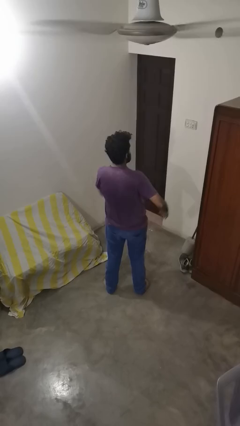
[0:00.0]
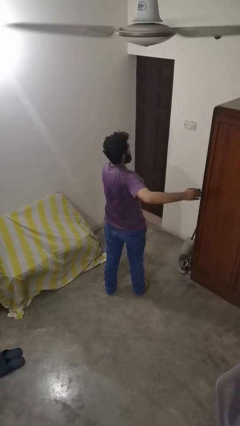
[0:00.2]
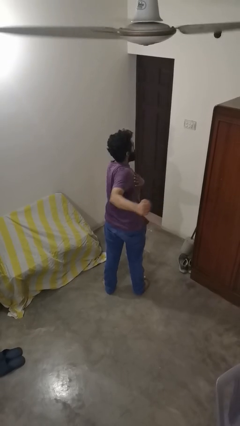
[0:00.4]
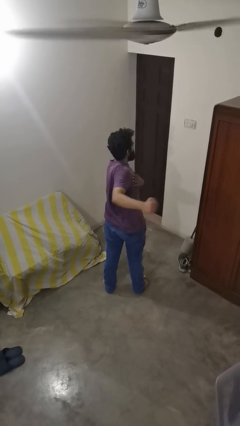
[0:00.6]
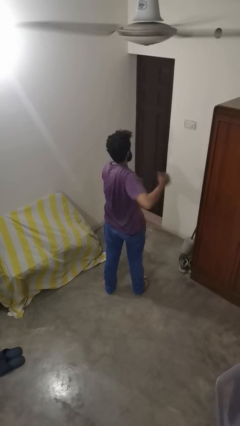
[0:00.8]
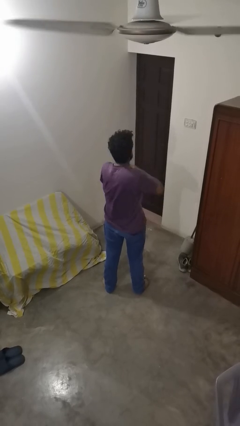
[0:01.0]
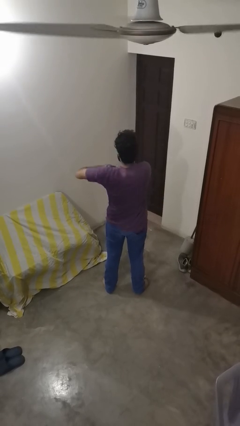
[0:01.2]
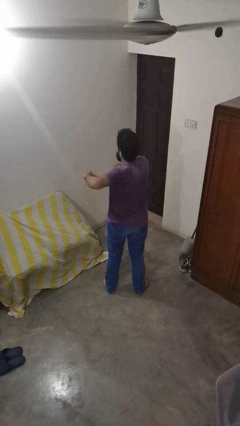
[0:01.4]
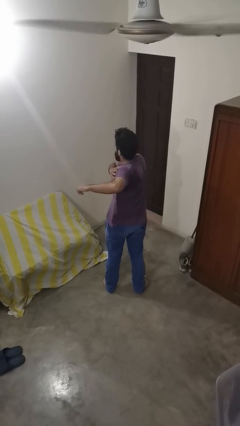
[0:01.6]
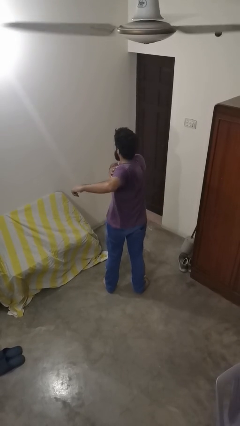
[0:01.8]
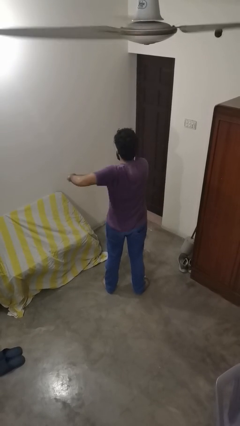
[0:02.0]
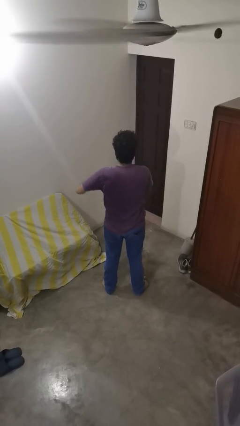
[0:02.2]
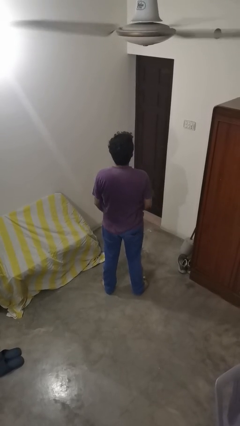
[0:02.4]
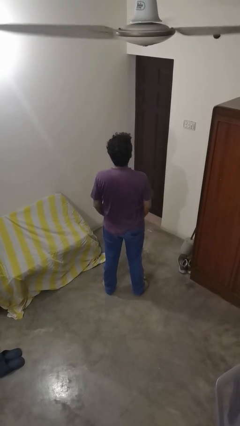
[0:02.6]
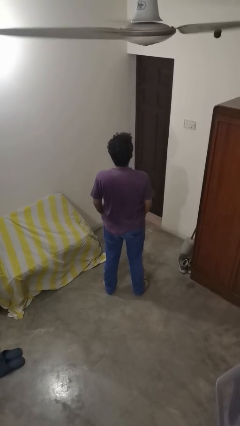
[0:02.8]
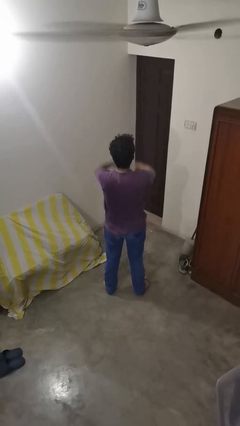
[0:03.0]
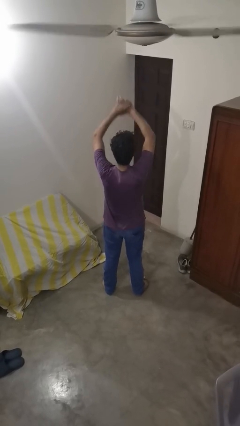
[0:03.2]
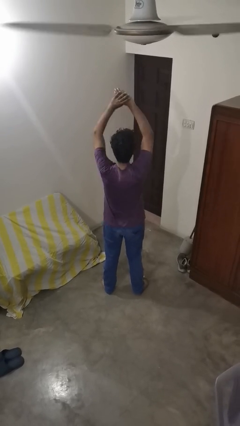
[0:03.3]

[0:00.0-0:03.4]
person stretches arms to side

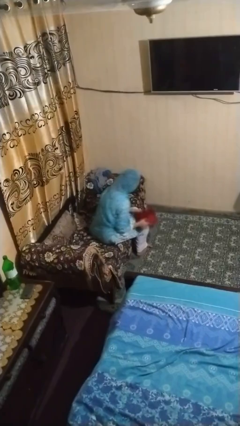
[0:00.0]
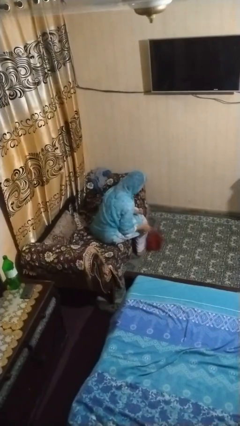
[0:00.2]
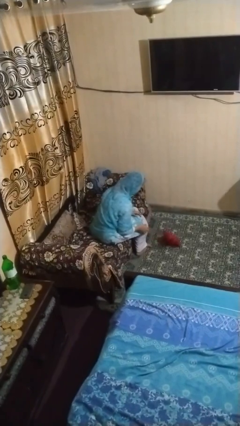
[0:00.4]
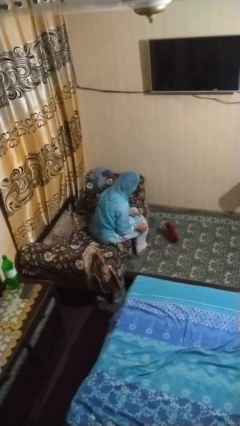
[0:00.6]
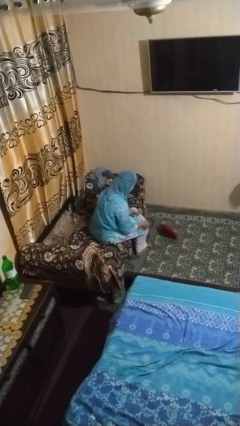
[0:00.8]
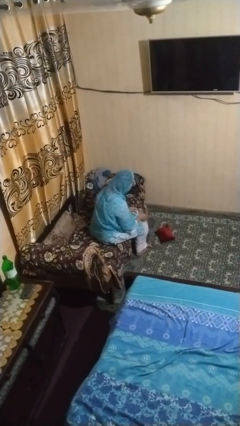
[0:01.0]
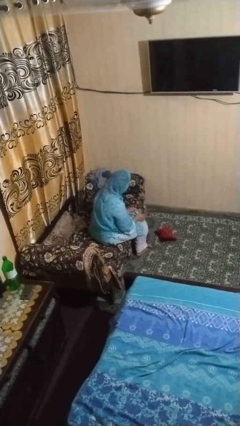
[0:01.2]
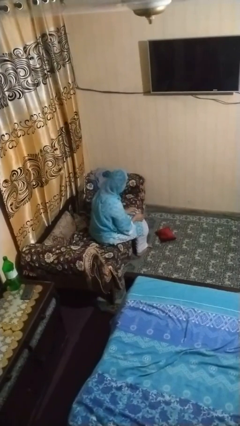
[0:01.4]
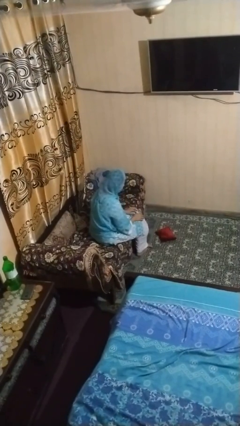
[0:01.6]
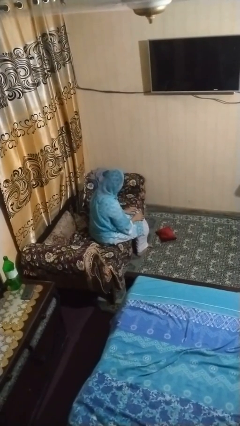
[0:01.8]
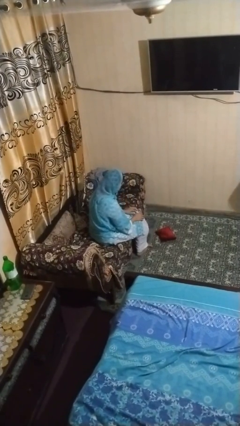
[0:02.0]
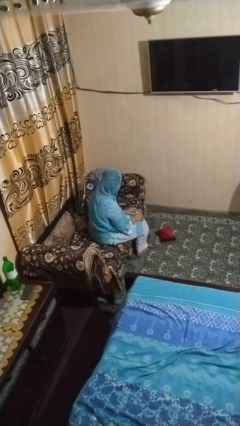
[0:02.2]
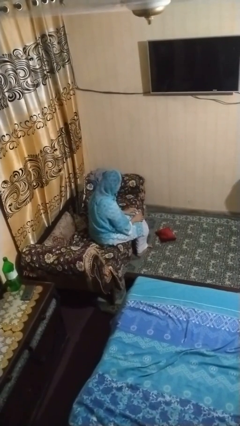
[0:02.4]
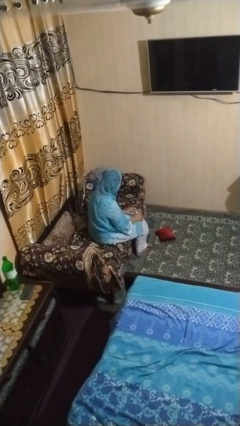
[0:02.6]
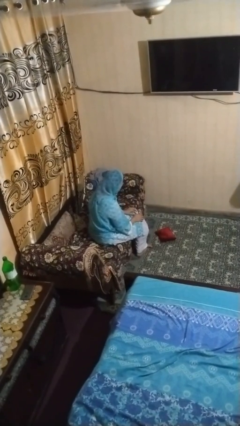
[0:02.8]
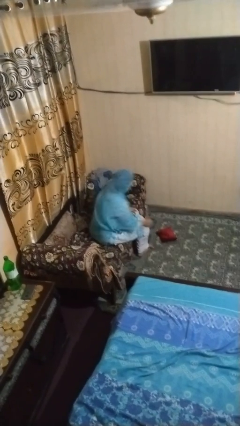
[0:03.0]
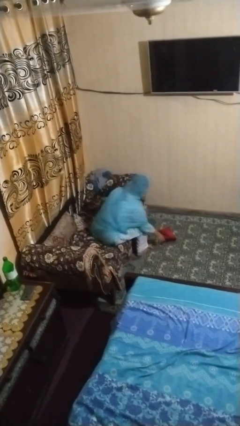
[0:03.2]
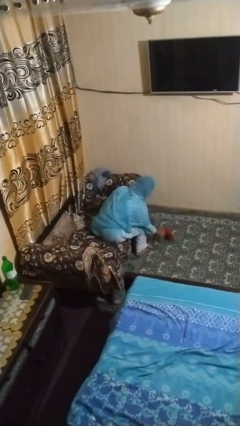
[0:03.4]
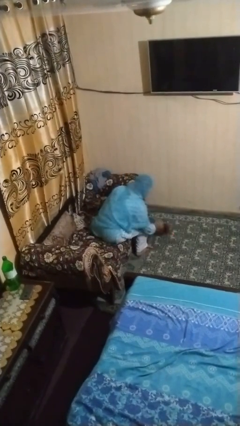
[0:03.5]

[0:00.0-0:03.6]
person drops object

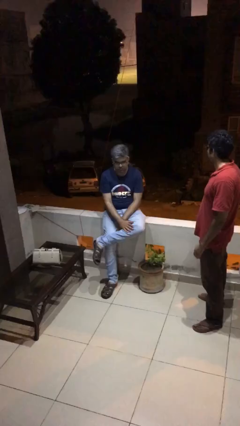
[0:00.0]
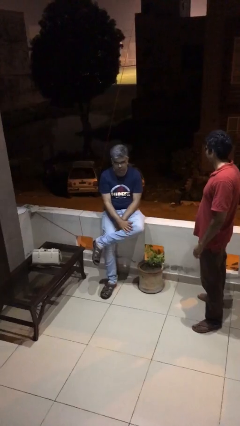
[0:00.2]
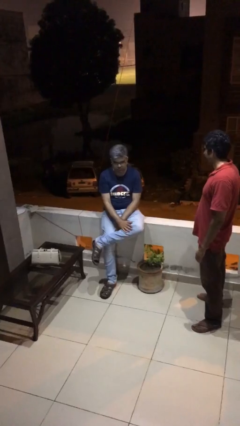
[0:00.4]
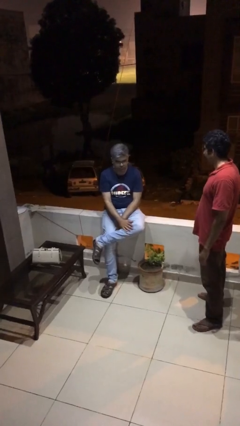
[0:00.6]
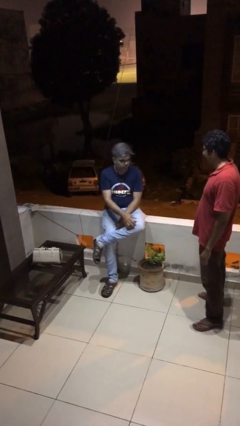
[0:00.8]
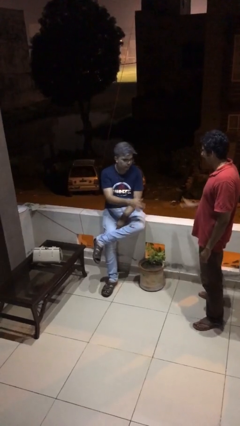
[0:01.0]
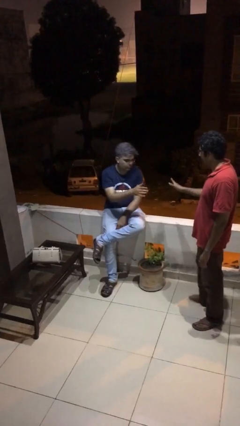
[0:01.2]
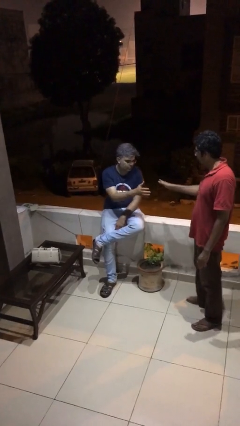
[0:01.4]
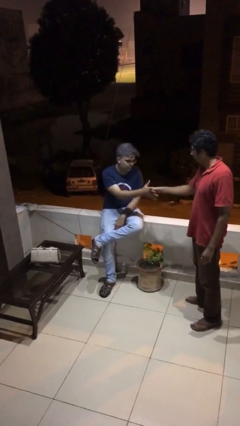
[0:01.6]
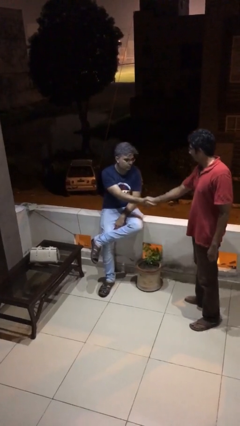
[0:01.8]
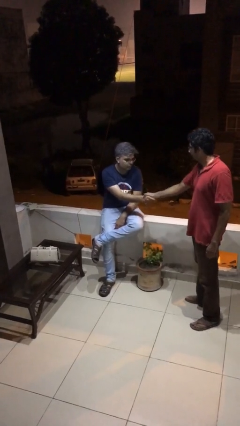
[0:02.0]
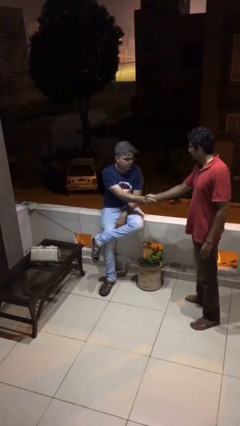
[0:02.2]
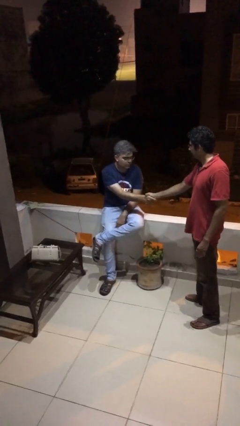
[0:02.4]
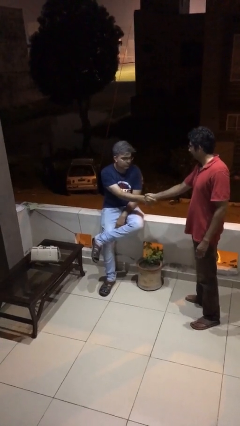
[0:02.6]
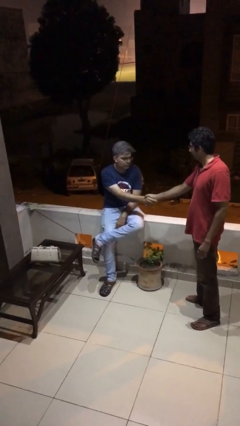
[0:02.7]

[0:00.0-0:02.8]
person shakes hand

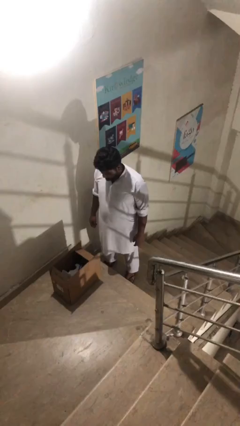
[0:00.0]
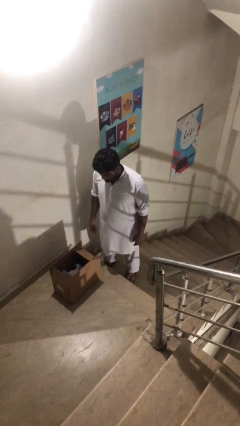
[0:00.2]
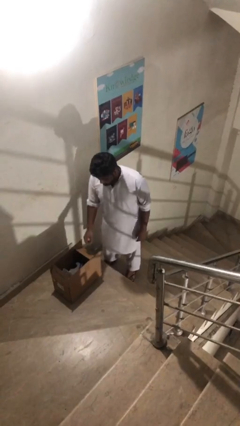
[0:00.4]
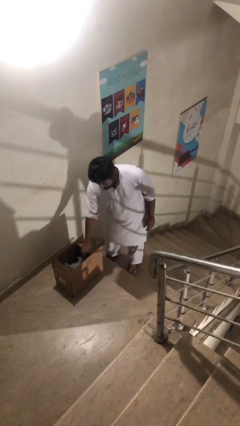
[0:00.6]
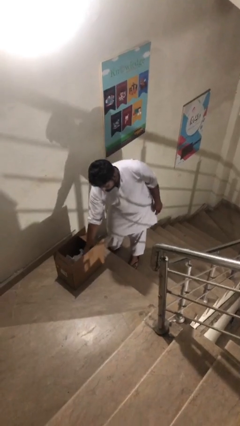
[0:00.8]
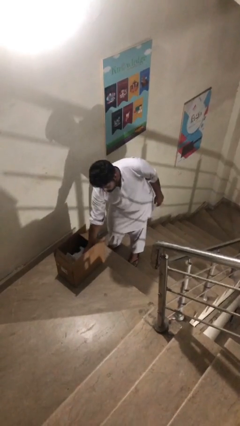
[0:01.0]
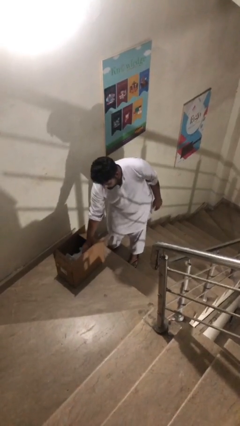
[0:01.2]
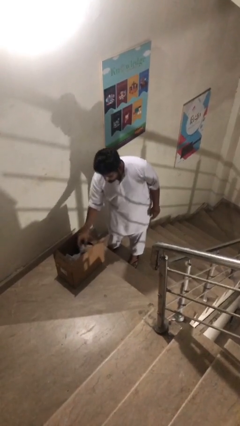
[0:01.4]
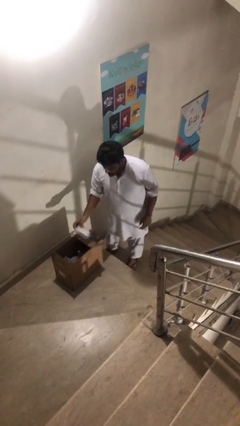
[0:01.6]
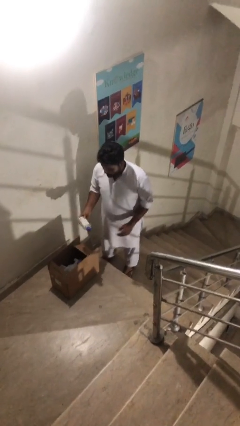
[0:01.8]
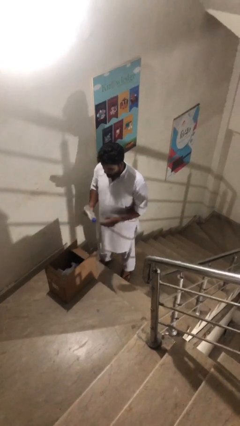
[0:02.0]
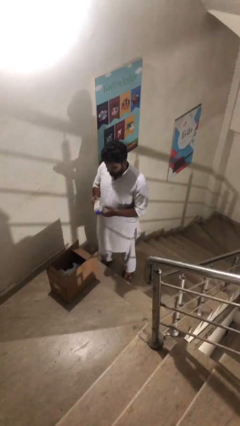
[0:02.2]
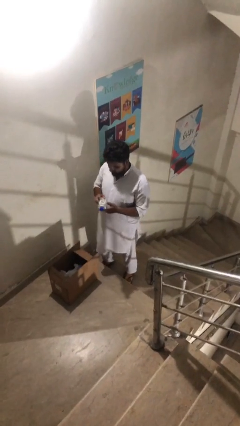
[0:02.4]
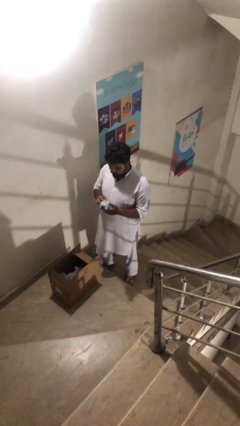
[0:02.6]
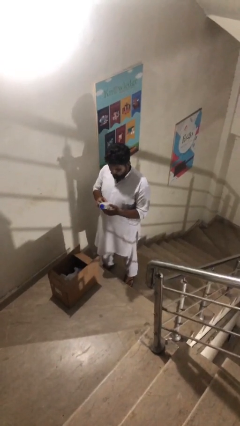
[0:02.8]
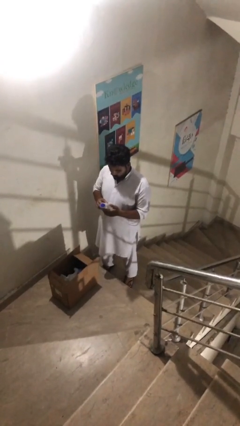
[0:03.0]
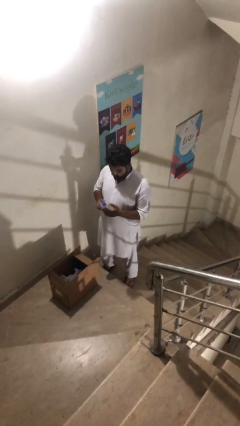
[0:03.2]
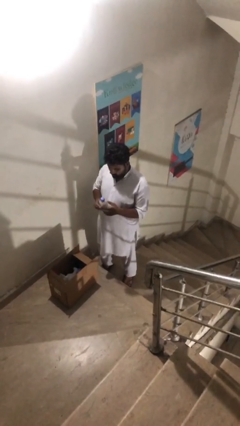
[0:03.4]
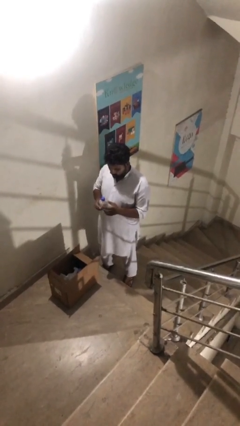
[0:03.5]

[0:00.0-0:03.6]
person takes object from box

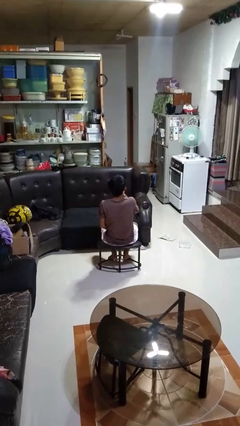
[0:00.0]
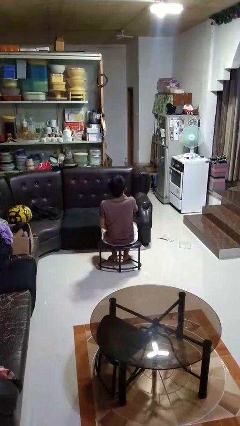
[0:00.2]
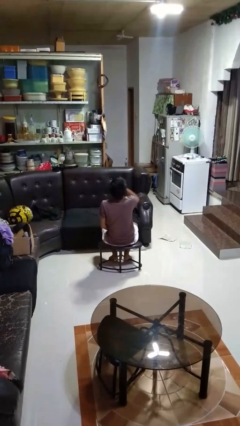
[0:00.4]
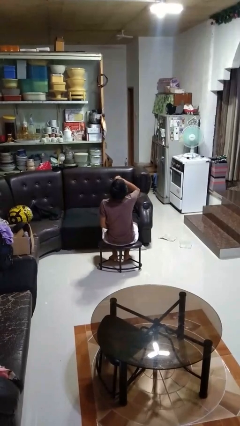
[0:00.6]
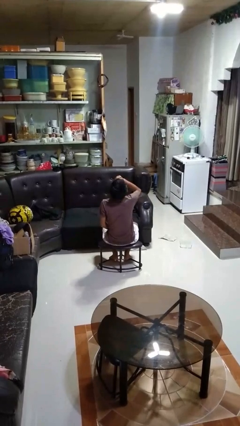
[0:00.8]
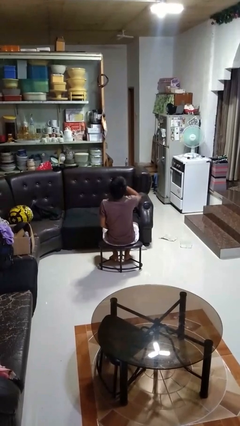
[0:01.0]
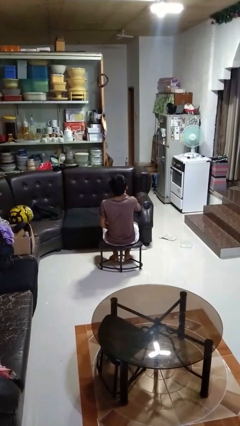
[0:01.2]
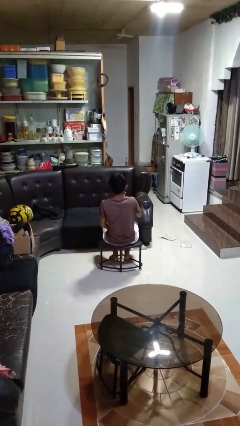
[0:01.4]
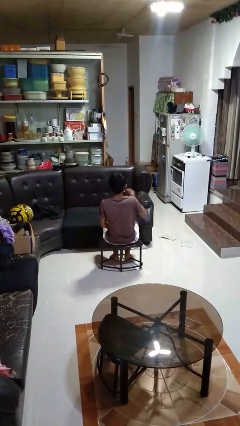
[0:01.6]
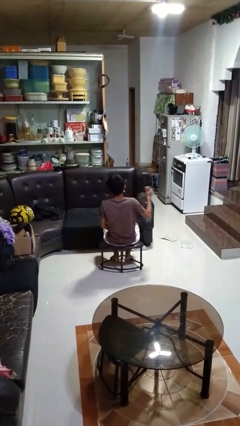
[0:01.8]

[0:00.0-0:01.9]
person drinks from beverage can

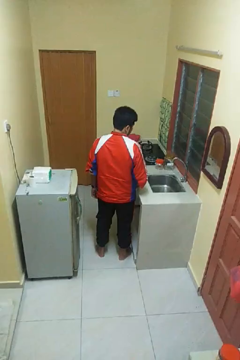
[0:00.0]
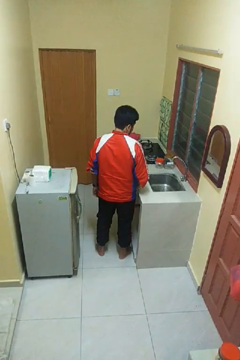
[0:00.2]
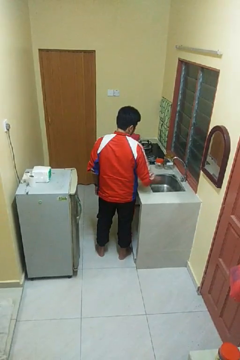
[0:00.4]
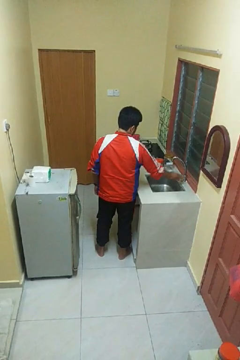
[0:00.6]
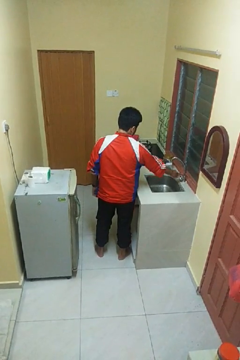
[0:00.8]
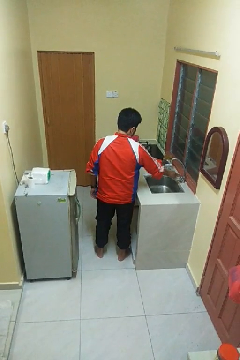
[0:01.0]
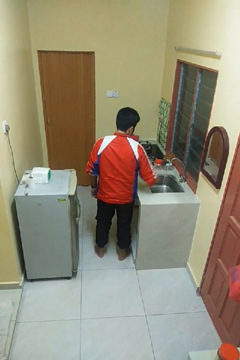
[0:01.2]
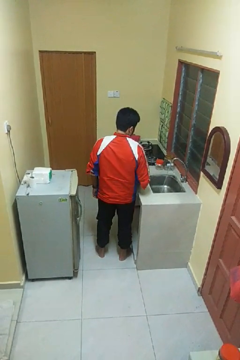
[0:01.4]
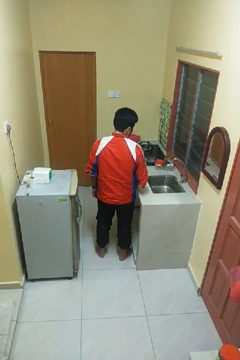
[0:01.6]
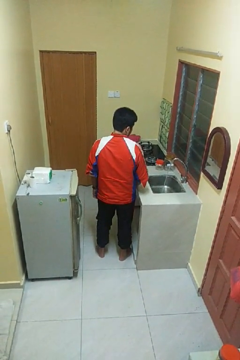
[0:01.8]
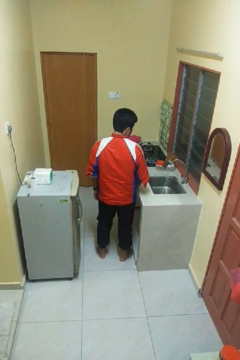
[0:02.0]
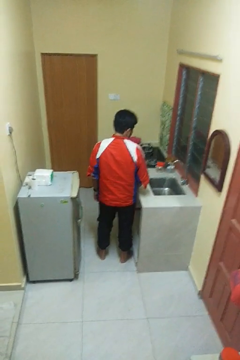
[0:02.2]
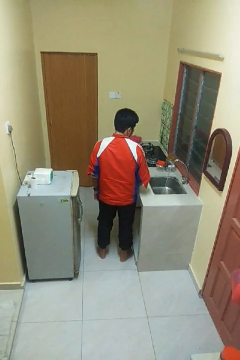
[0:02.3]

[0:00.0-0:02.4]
person turns on faucet

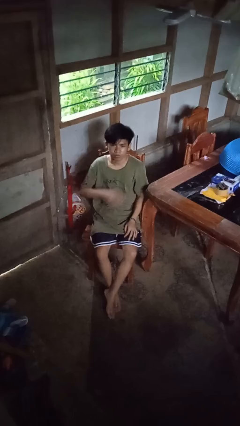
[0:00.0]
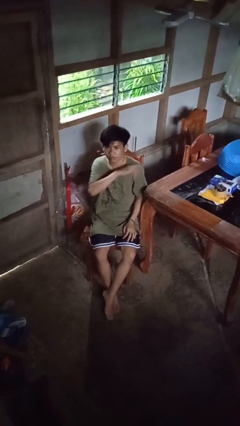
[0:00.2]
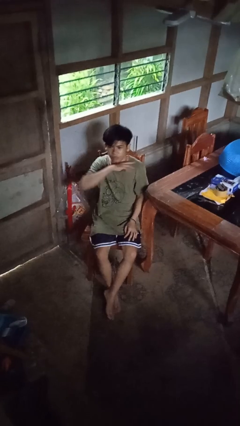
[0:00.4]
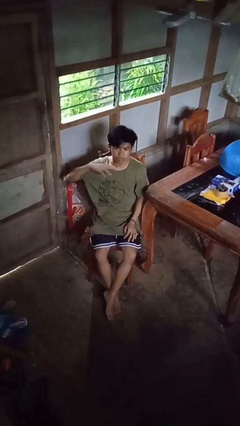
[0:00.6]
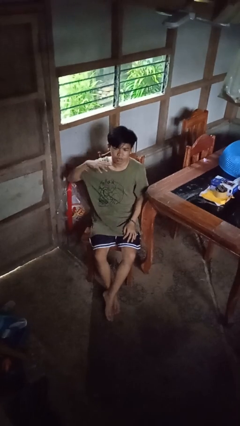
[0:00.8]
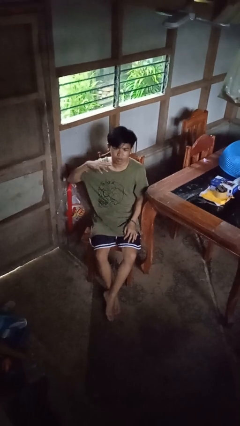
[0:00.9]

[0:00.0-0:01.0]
person gestures cut
